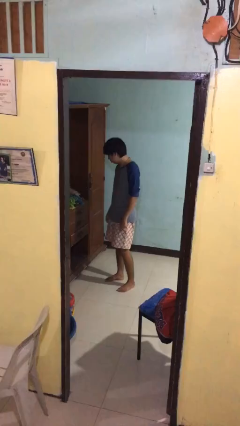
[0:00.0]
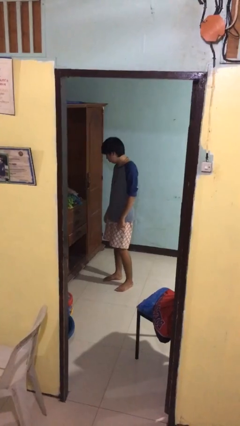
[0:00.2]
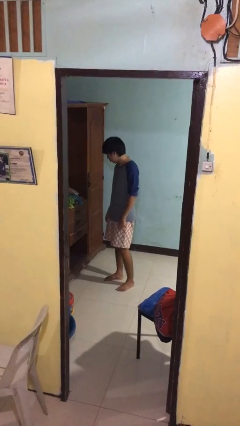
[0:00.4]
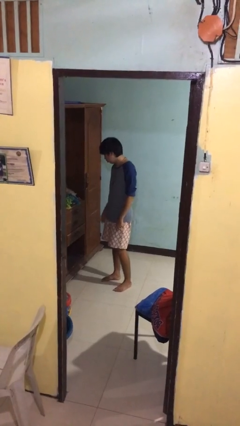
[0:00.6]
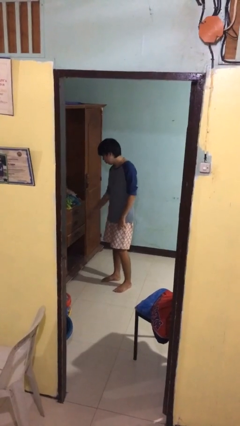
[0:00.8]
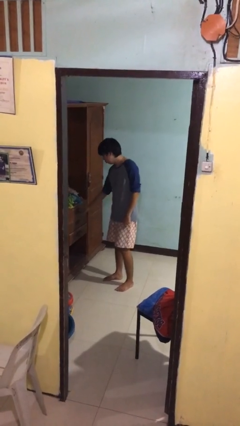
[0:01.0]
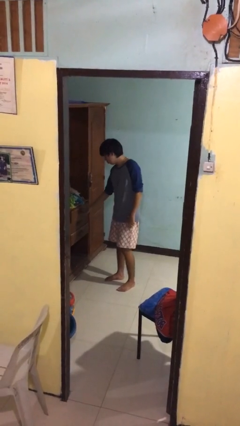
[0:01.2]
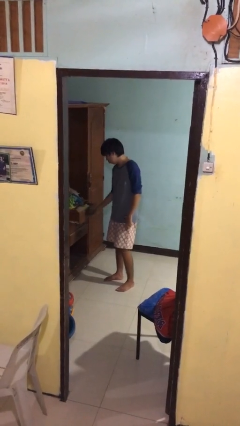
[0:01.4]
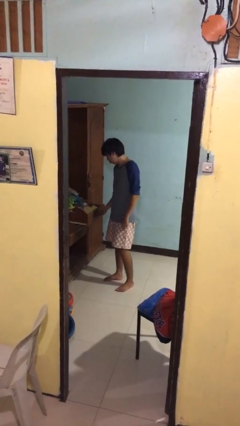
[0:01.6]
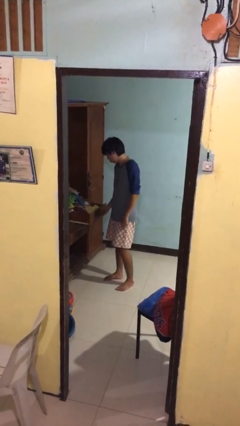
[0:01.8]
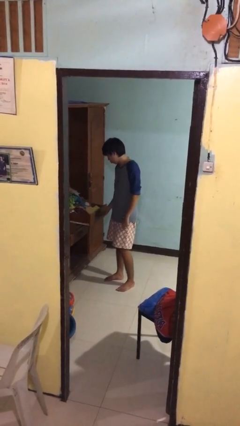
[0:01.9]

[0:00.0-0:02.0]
person opens dresser drawer

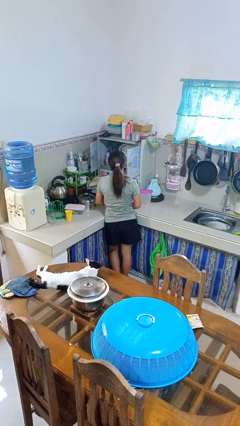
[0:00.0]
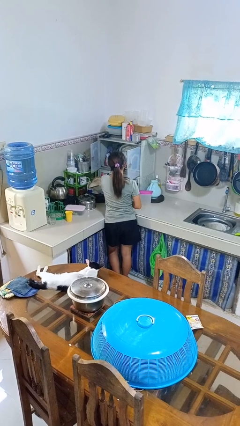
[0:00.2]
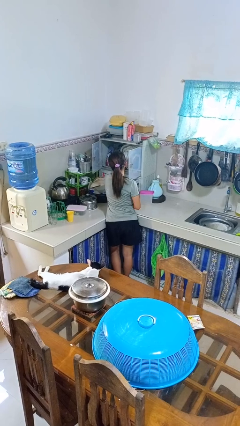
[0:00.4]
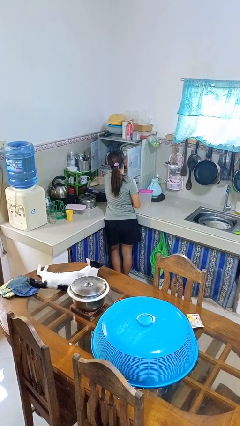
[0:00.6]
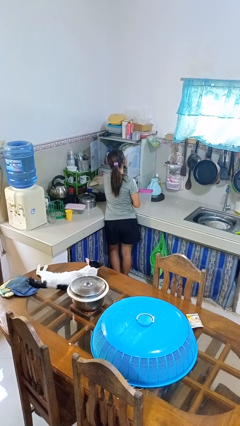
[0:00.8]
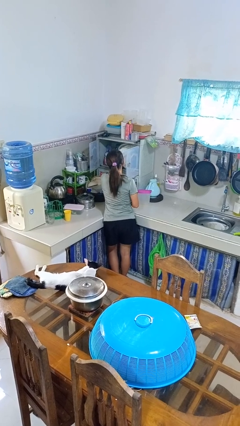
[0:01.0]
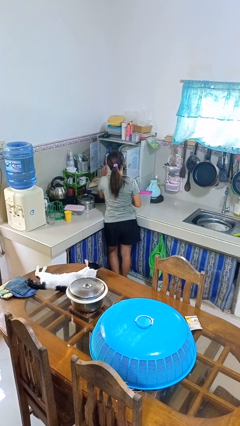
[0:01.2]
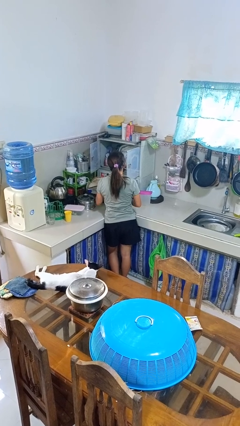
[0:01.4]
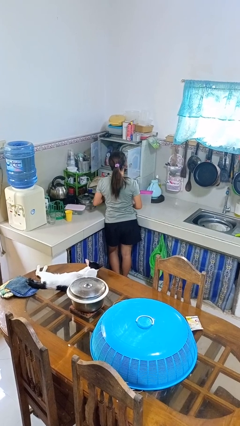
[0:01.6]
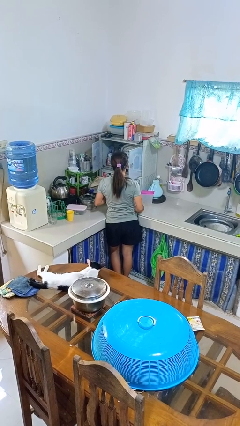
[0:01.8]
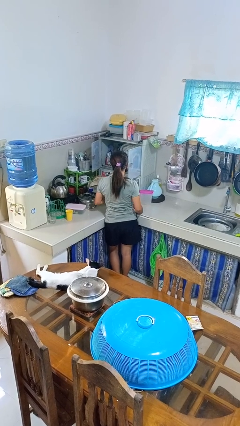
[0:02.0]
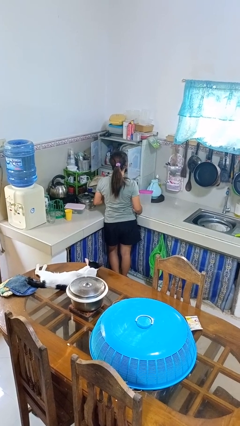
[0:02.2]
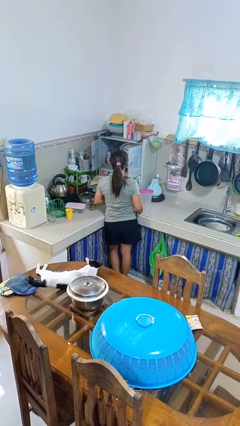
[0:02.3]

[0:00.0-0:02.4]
person takes object from kitchen drawer

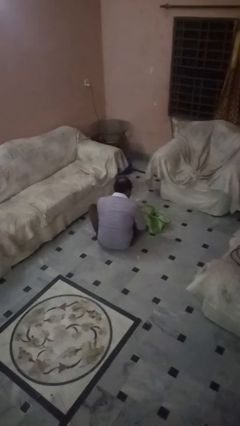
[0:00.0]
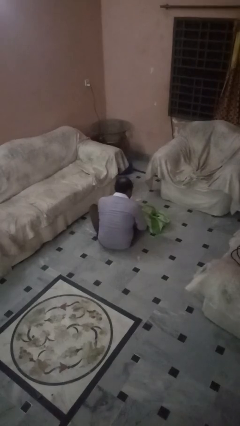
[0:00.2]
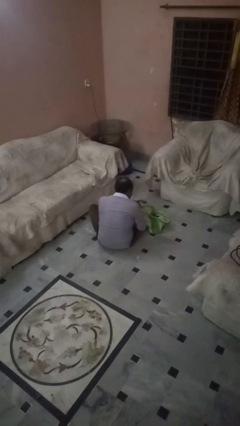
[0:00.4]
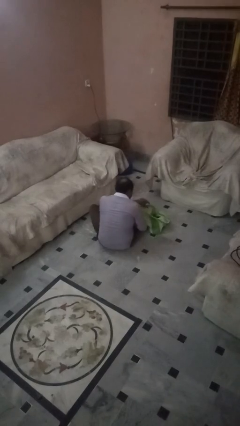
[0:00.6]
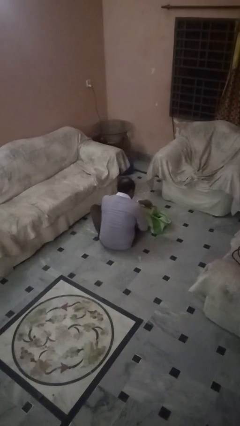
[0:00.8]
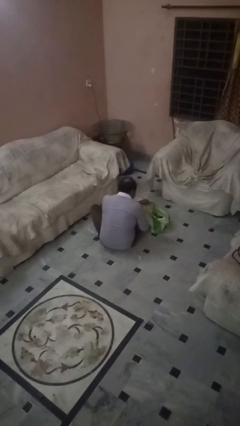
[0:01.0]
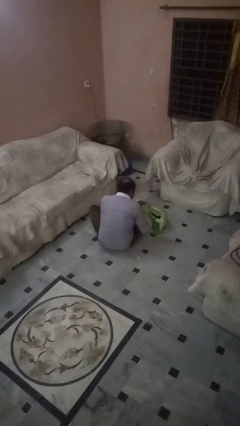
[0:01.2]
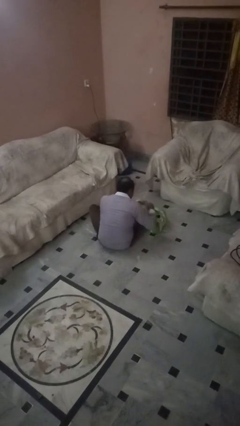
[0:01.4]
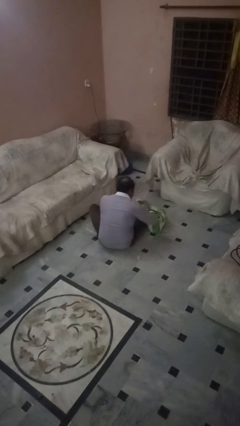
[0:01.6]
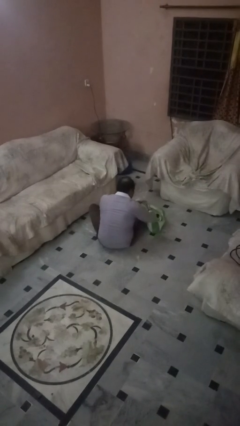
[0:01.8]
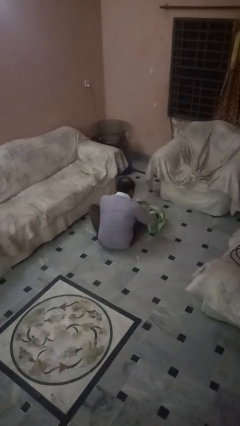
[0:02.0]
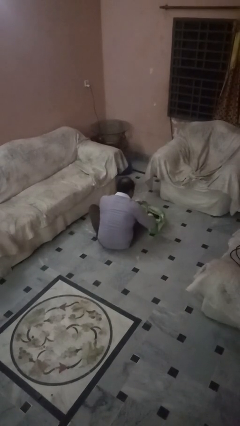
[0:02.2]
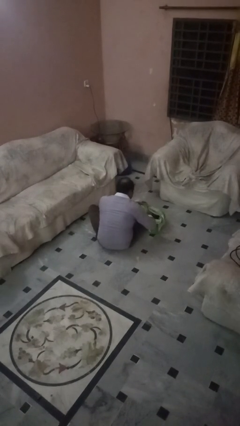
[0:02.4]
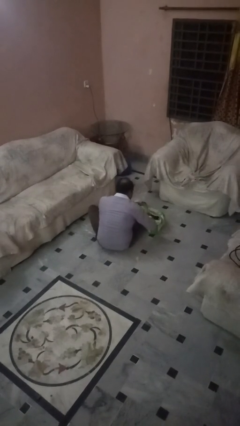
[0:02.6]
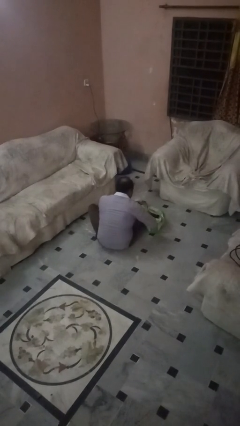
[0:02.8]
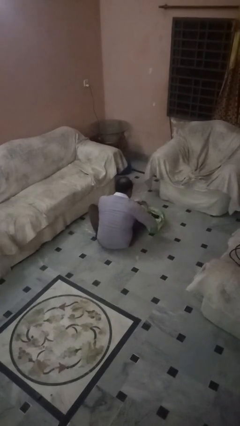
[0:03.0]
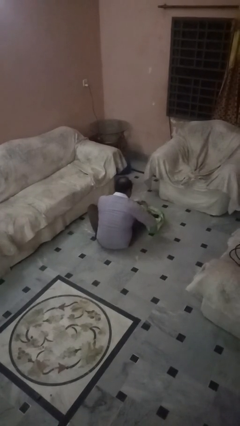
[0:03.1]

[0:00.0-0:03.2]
person searches in bag

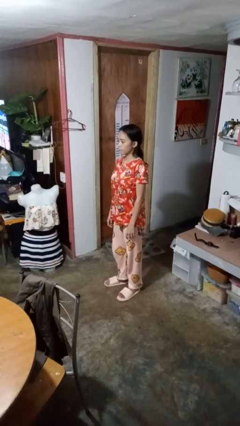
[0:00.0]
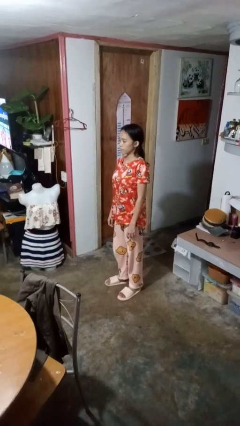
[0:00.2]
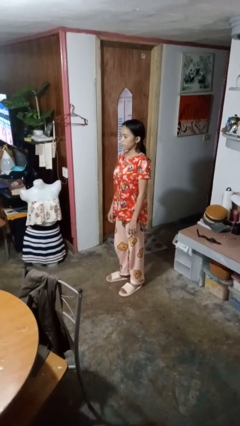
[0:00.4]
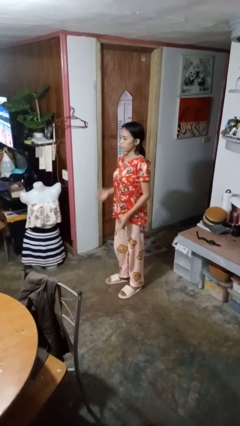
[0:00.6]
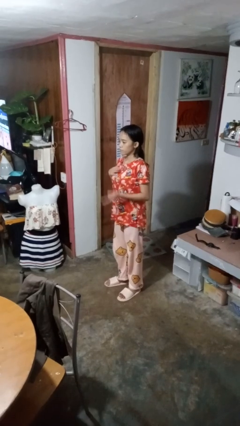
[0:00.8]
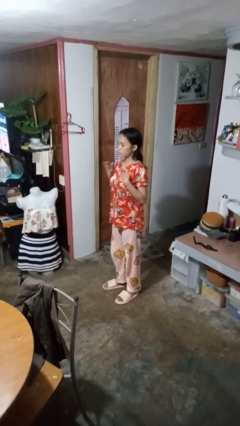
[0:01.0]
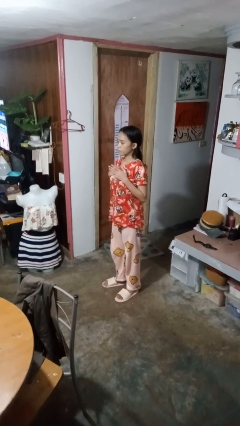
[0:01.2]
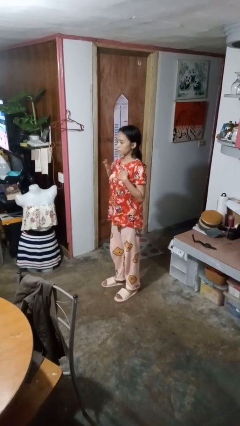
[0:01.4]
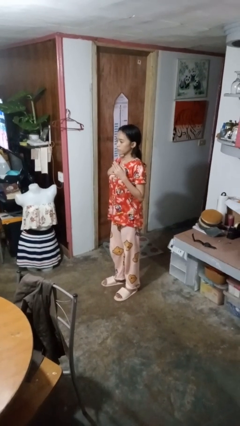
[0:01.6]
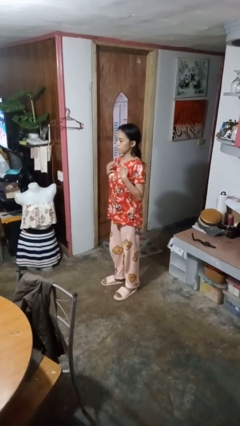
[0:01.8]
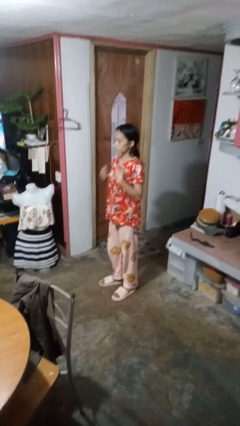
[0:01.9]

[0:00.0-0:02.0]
person drums on chest

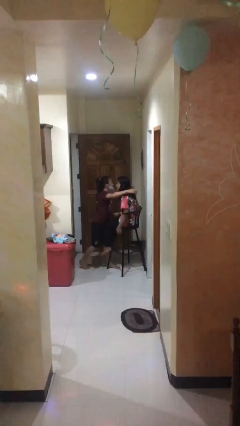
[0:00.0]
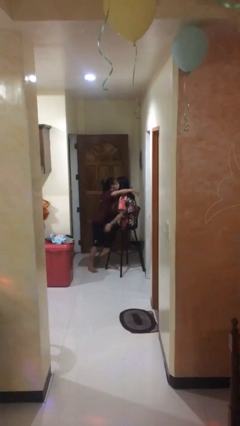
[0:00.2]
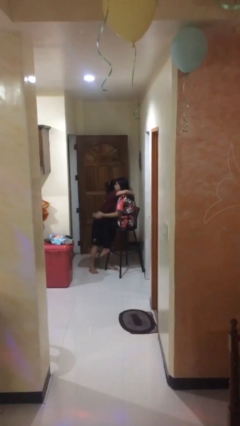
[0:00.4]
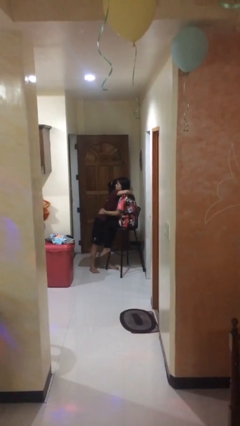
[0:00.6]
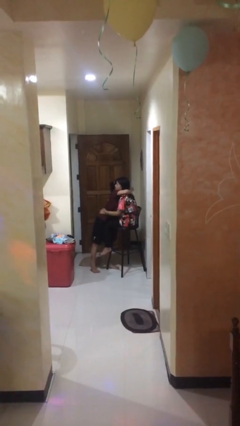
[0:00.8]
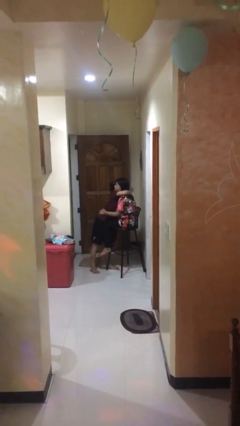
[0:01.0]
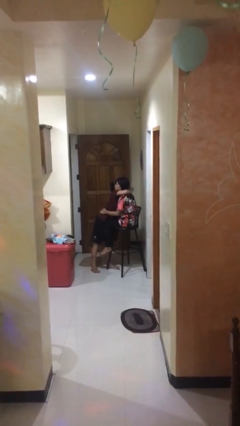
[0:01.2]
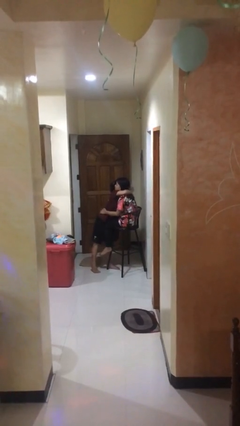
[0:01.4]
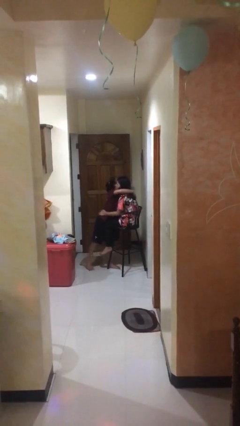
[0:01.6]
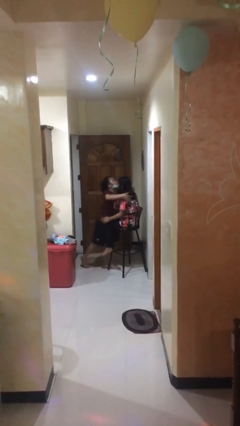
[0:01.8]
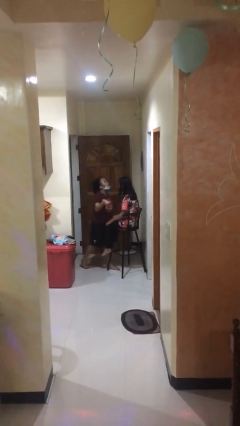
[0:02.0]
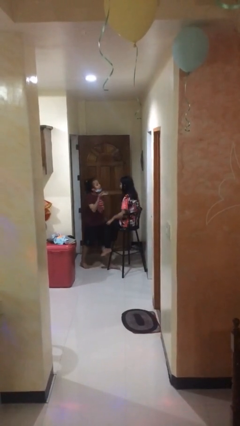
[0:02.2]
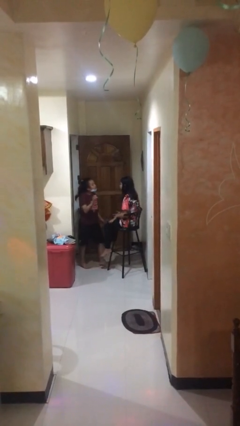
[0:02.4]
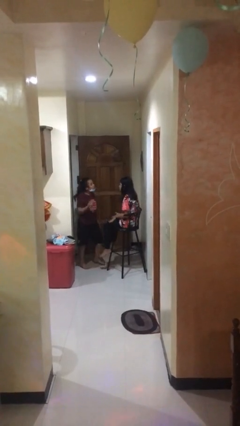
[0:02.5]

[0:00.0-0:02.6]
person embraces person

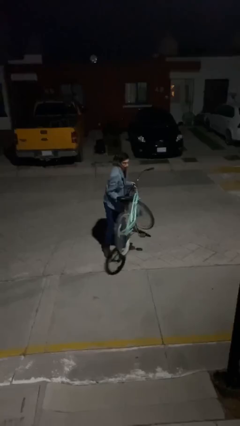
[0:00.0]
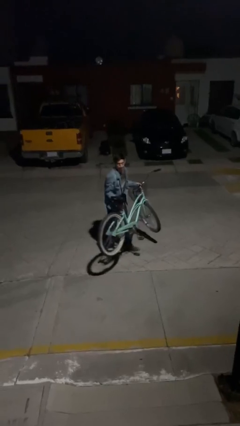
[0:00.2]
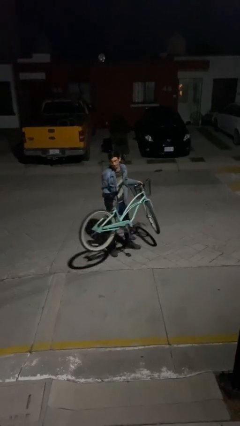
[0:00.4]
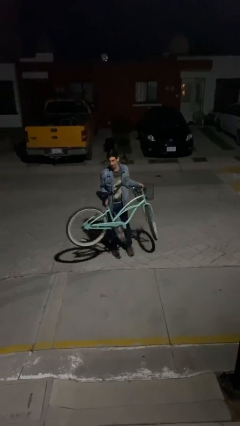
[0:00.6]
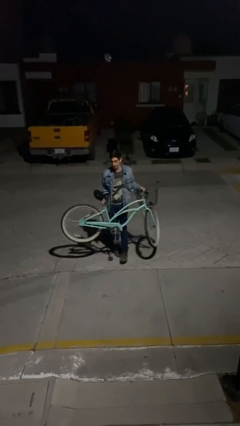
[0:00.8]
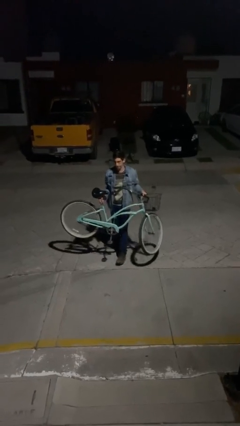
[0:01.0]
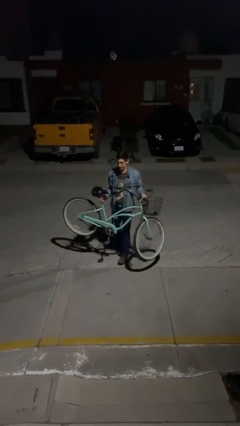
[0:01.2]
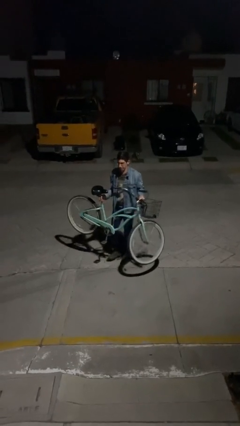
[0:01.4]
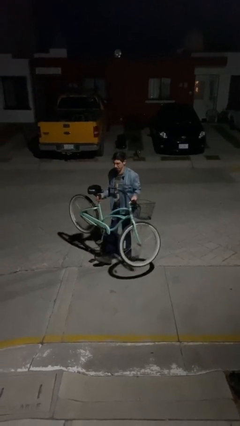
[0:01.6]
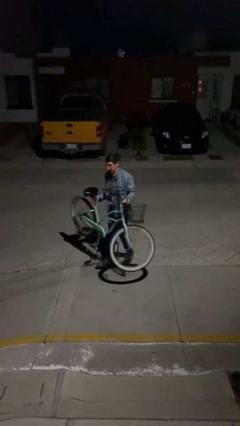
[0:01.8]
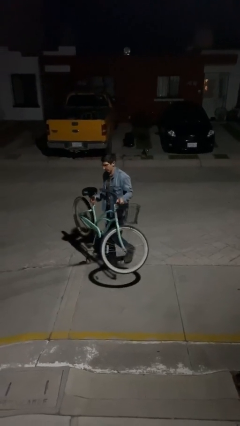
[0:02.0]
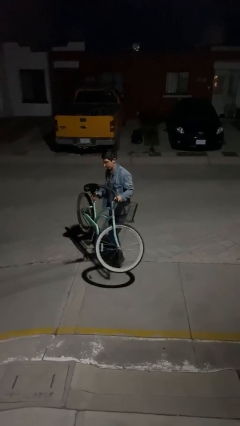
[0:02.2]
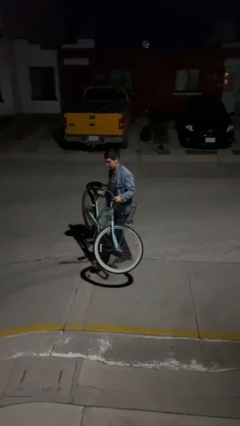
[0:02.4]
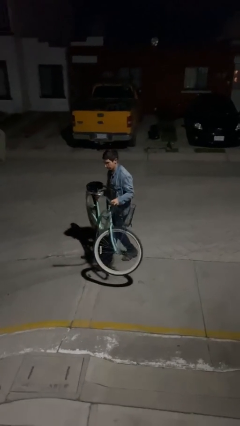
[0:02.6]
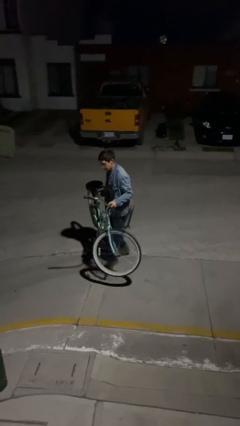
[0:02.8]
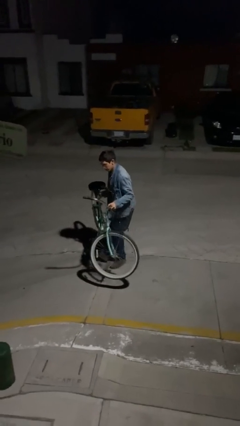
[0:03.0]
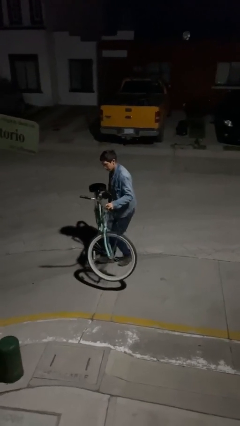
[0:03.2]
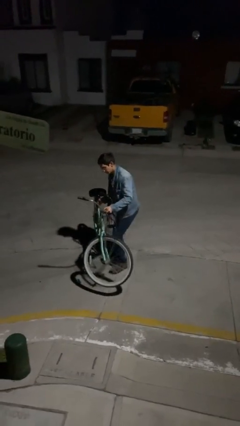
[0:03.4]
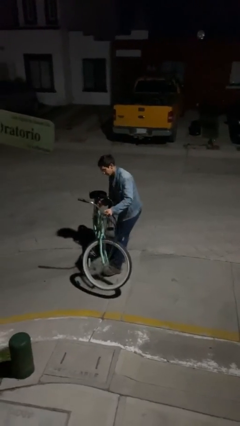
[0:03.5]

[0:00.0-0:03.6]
person carries heavy object

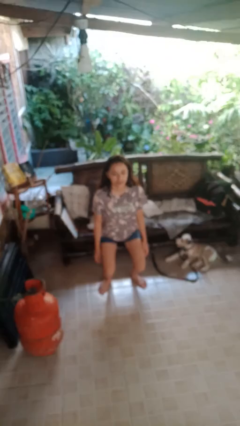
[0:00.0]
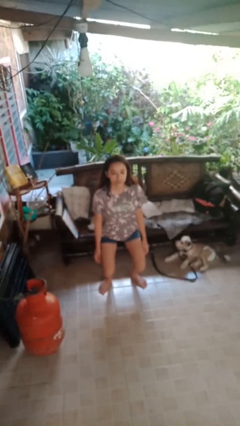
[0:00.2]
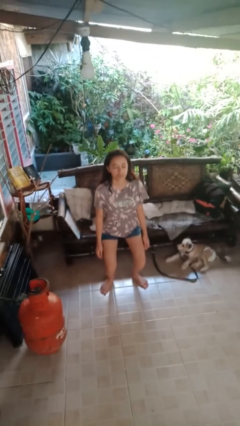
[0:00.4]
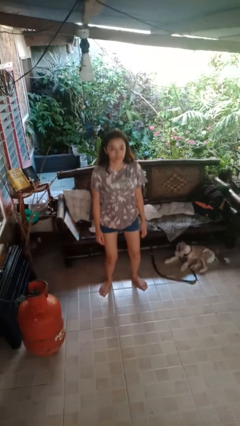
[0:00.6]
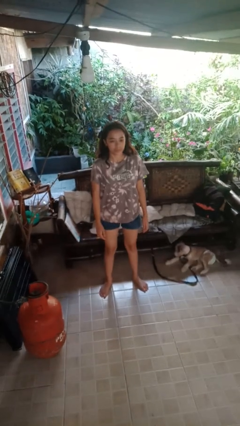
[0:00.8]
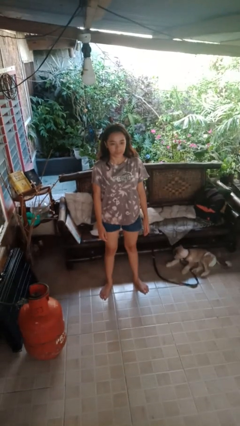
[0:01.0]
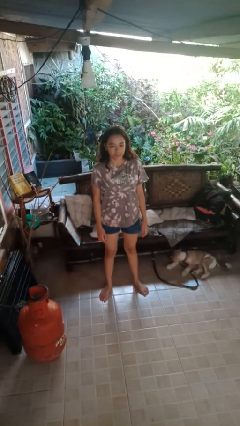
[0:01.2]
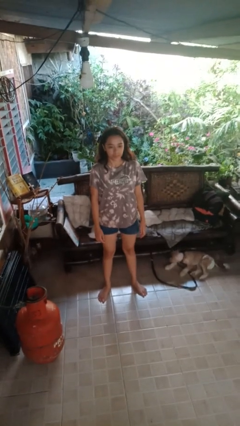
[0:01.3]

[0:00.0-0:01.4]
person stands up
